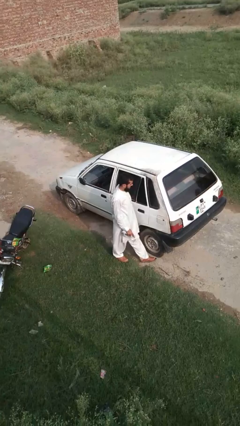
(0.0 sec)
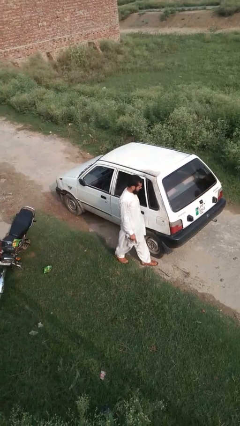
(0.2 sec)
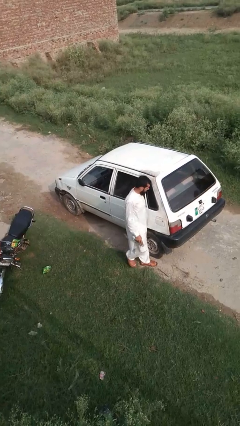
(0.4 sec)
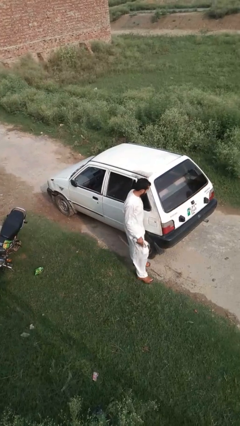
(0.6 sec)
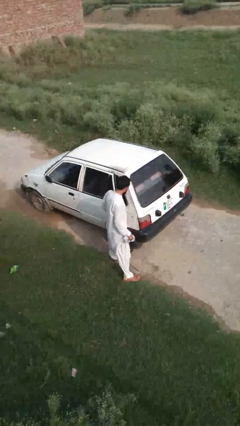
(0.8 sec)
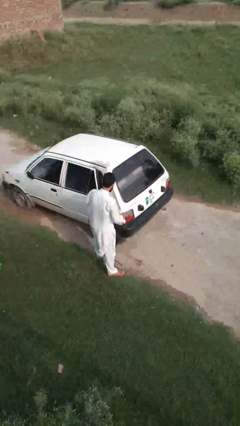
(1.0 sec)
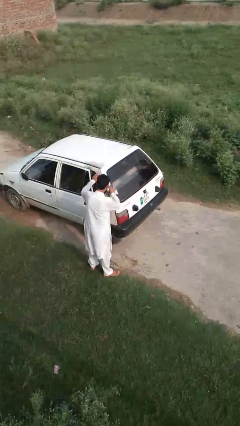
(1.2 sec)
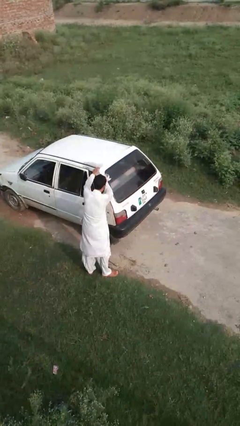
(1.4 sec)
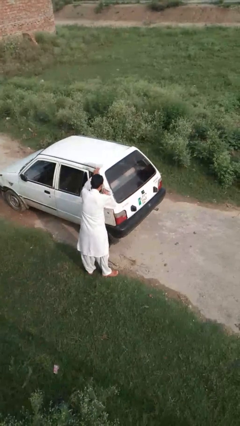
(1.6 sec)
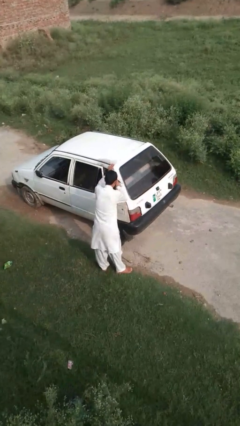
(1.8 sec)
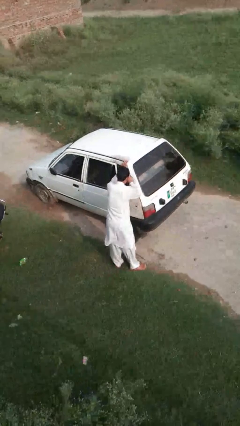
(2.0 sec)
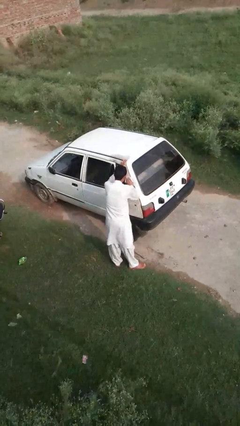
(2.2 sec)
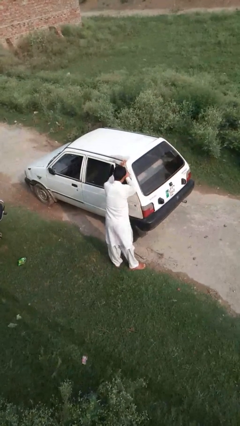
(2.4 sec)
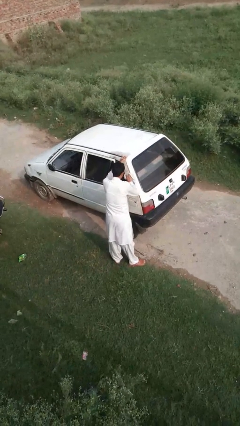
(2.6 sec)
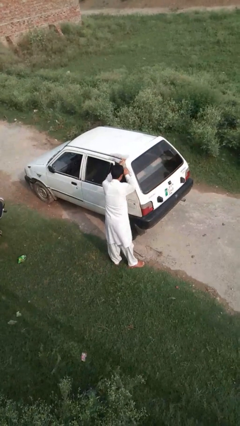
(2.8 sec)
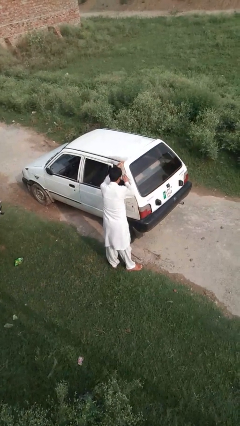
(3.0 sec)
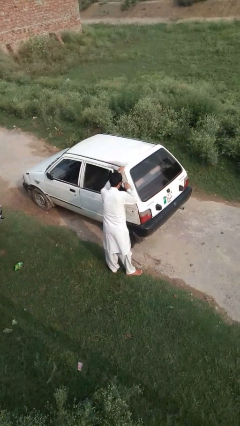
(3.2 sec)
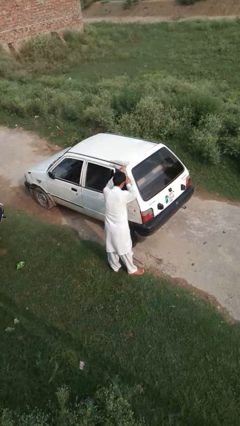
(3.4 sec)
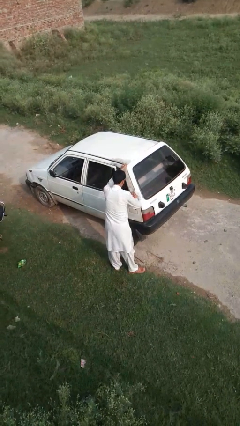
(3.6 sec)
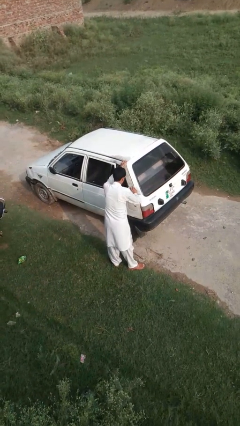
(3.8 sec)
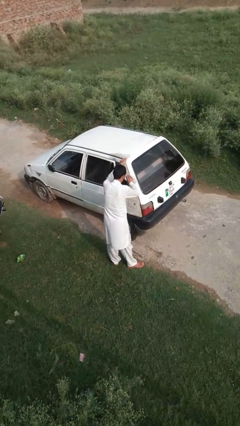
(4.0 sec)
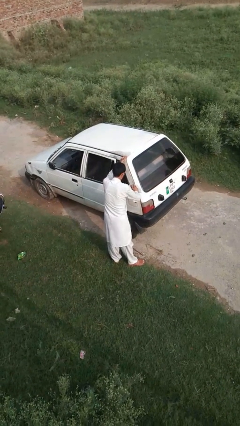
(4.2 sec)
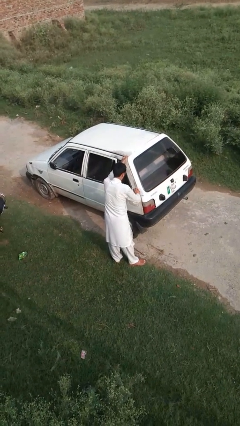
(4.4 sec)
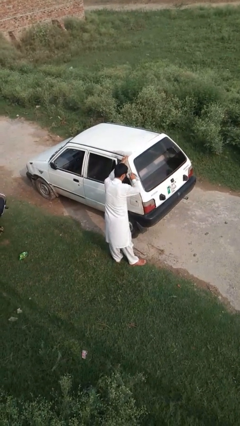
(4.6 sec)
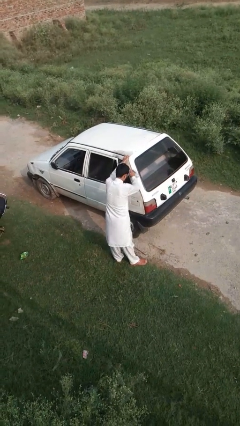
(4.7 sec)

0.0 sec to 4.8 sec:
person polishes car with rag

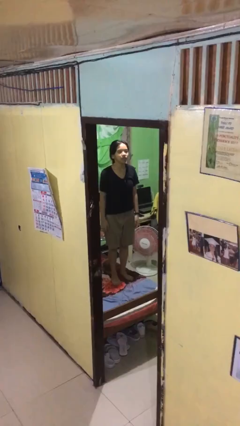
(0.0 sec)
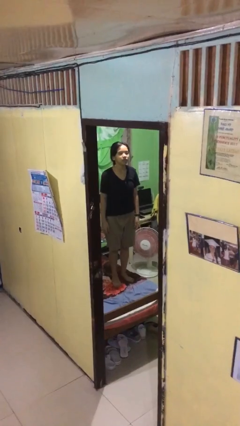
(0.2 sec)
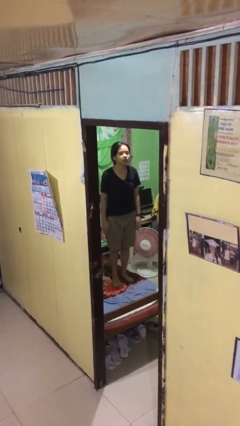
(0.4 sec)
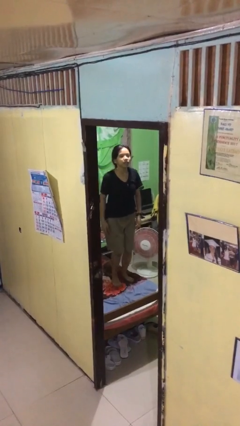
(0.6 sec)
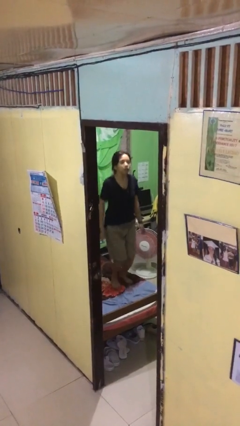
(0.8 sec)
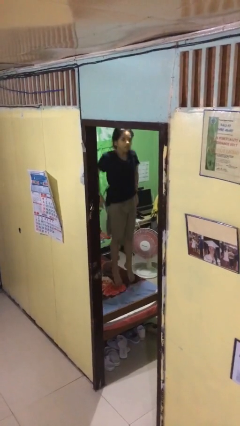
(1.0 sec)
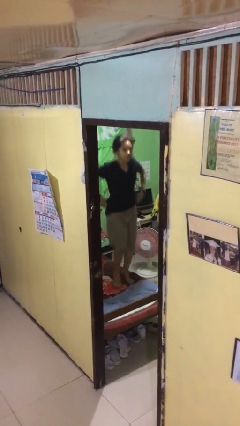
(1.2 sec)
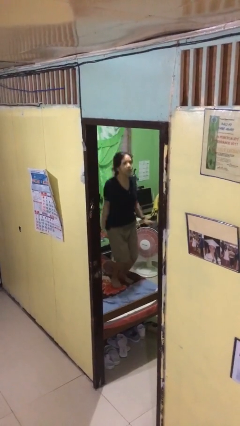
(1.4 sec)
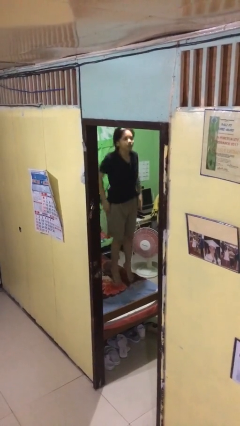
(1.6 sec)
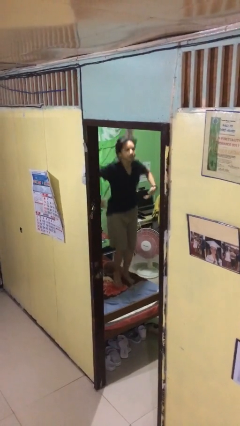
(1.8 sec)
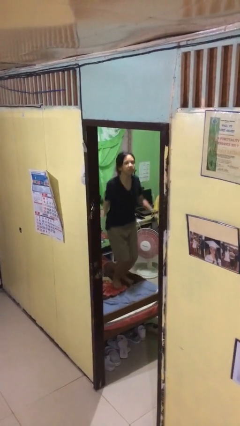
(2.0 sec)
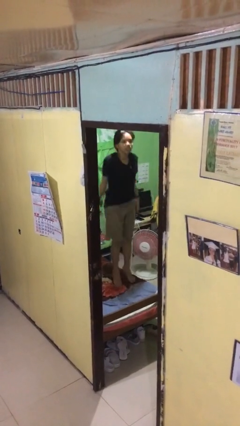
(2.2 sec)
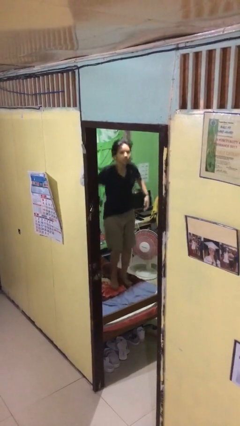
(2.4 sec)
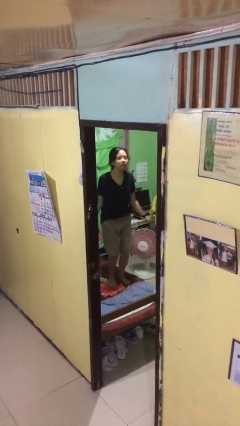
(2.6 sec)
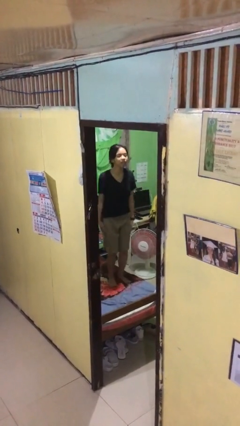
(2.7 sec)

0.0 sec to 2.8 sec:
person jumps on bed

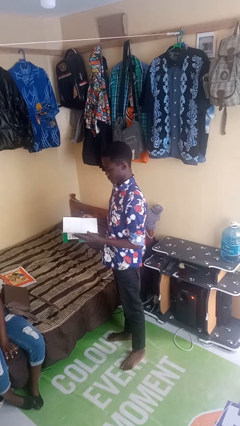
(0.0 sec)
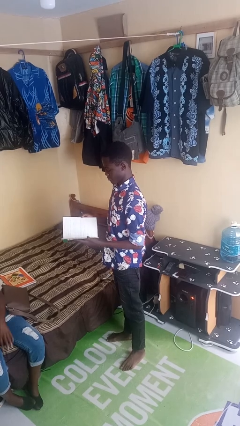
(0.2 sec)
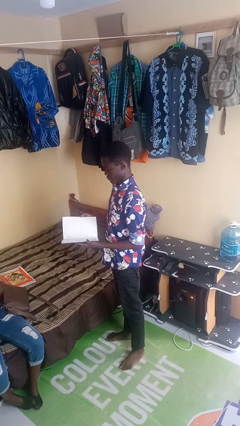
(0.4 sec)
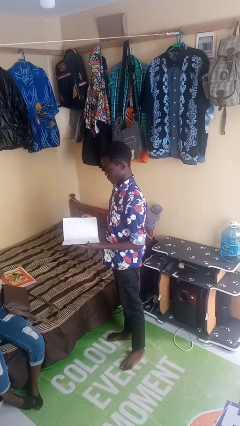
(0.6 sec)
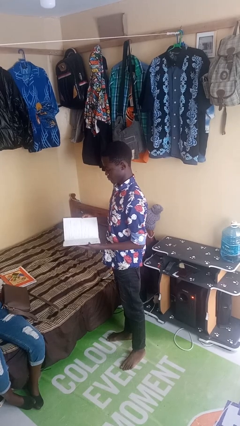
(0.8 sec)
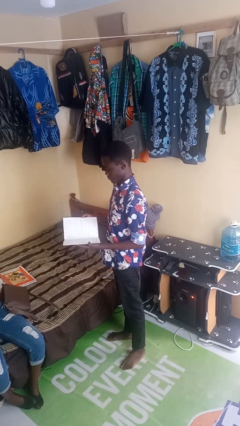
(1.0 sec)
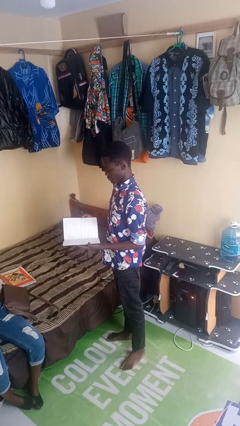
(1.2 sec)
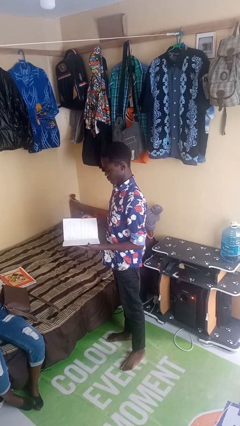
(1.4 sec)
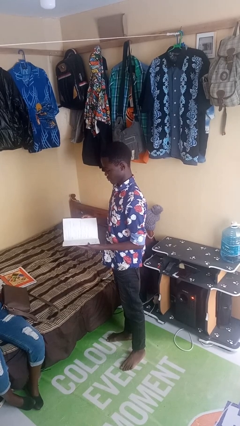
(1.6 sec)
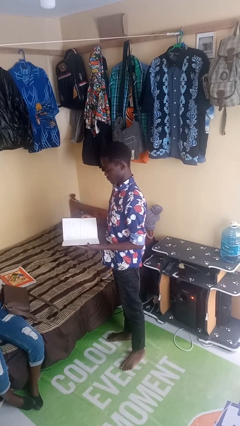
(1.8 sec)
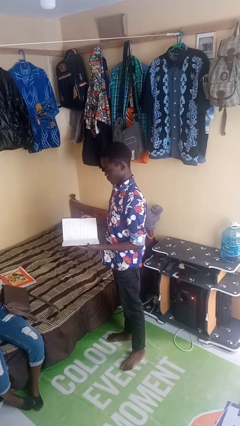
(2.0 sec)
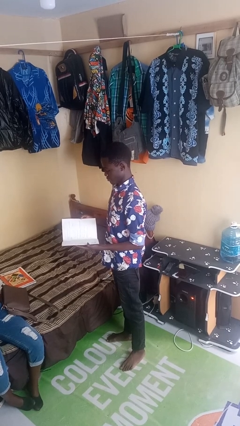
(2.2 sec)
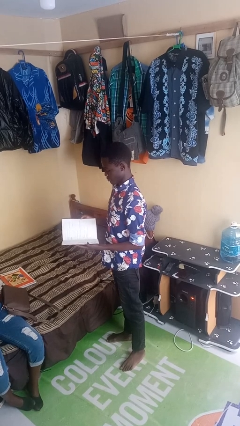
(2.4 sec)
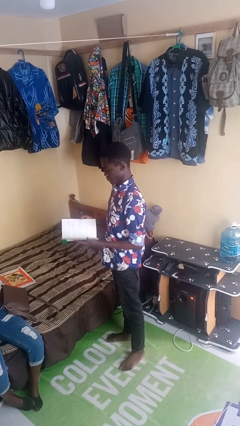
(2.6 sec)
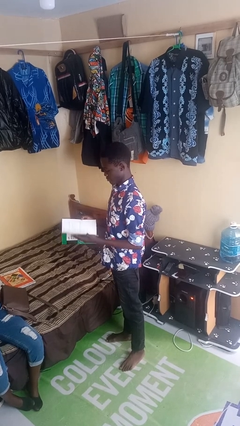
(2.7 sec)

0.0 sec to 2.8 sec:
person reads magazine

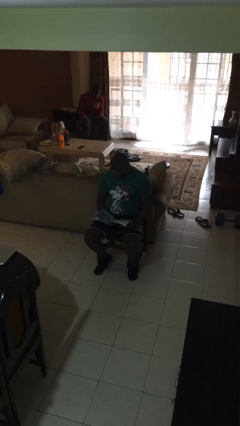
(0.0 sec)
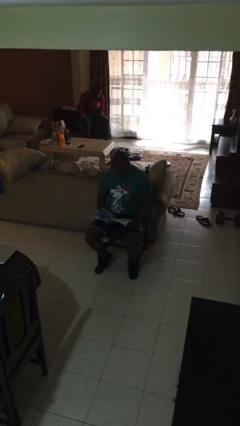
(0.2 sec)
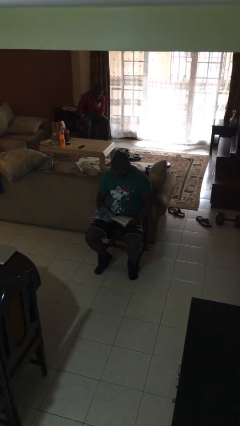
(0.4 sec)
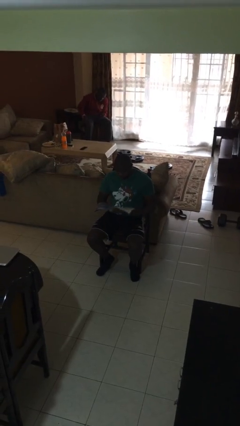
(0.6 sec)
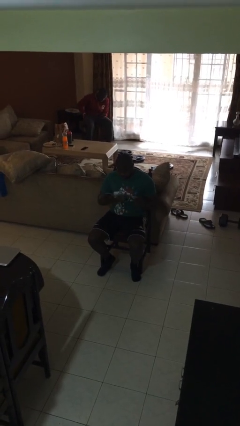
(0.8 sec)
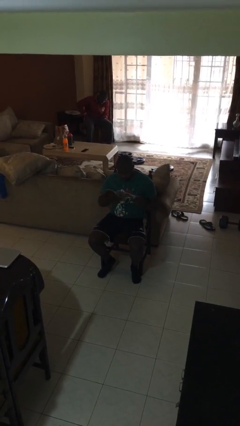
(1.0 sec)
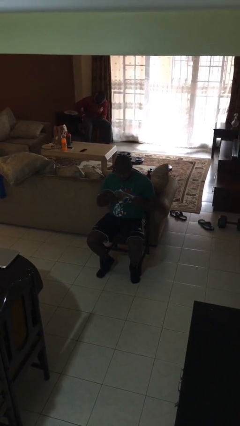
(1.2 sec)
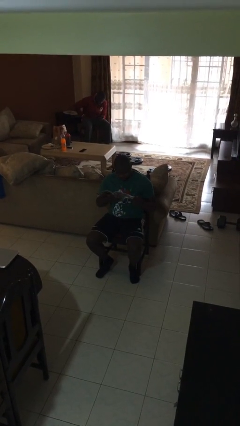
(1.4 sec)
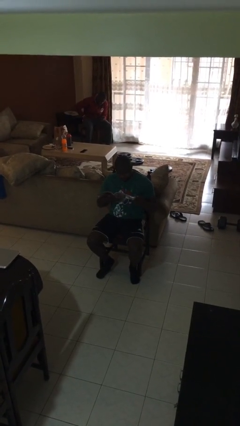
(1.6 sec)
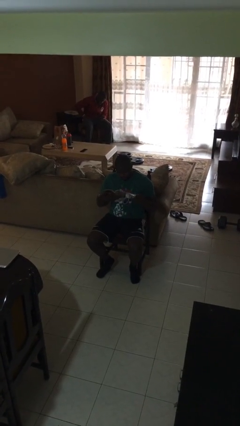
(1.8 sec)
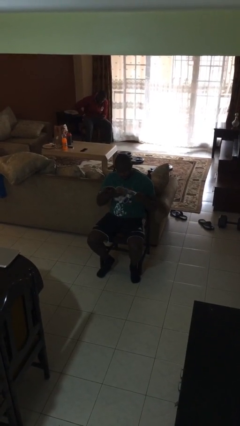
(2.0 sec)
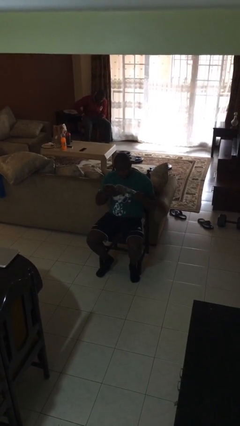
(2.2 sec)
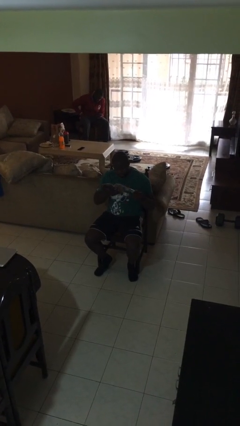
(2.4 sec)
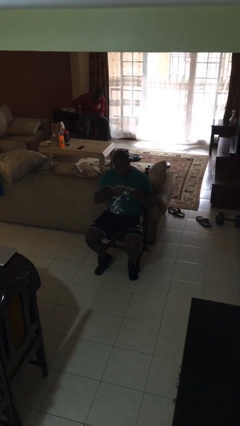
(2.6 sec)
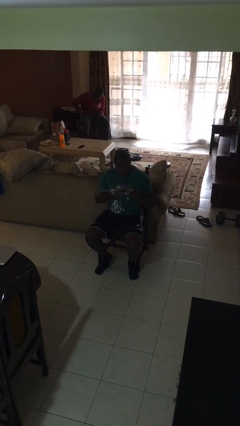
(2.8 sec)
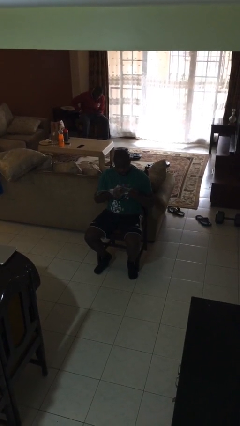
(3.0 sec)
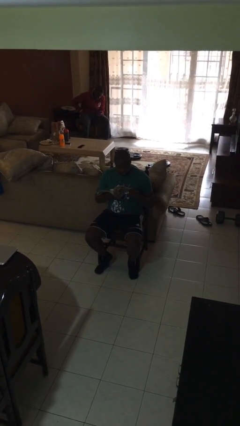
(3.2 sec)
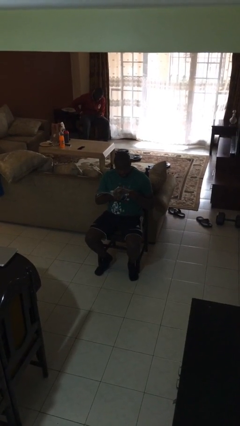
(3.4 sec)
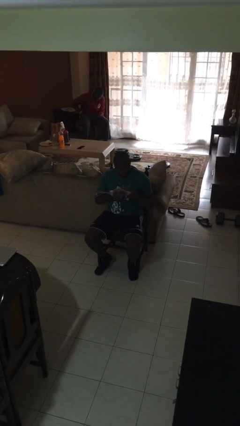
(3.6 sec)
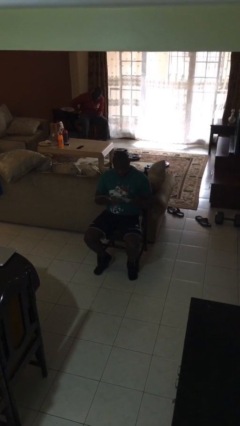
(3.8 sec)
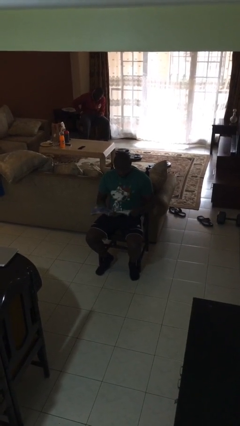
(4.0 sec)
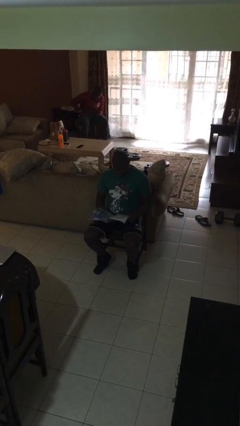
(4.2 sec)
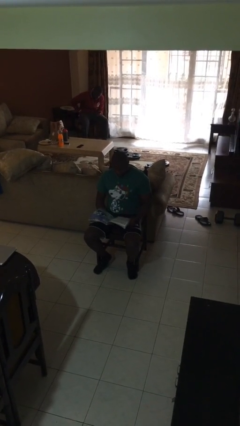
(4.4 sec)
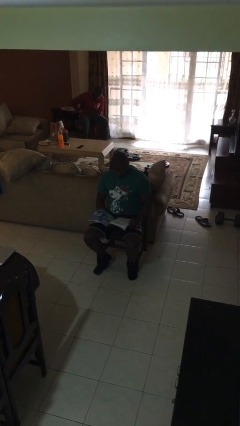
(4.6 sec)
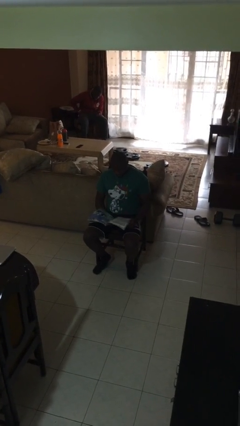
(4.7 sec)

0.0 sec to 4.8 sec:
person reads document

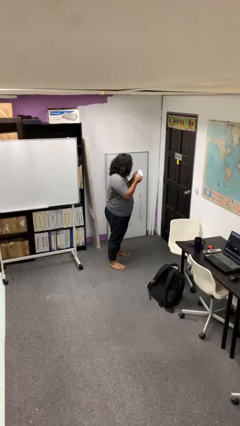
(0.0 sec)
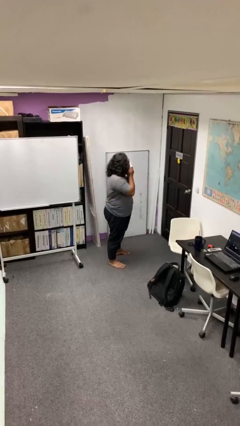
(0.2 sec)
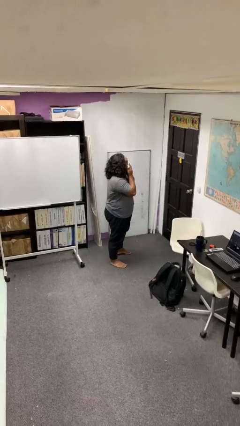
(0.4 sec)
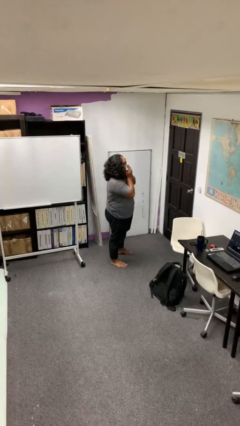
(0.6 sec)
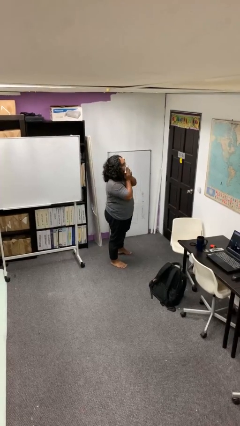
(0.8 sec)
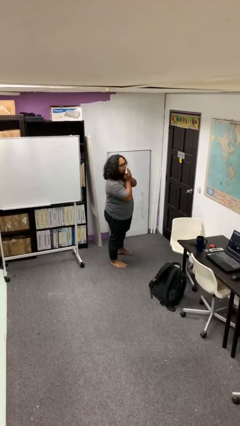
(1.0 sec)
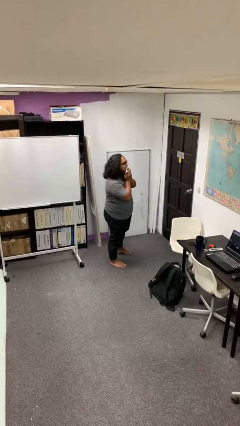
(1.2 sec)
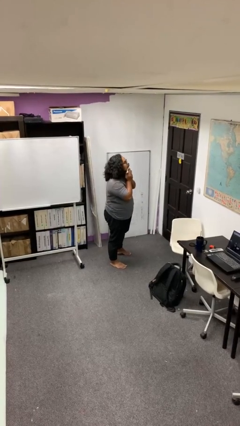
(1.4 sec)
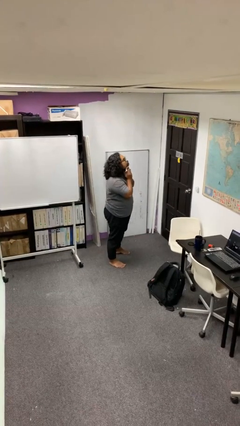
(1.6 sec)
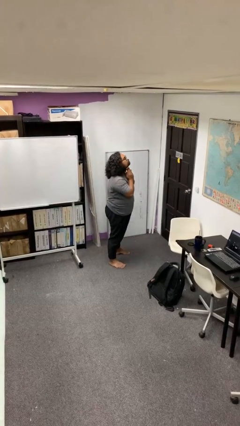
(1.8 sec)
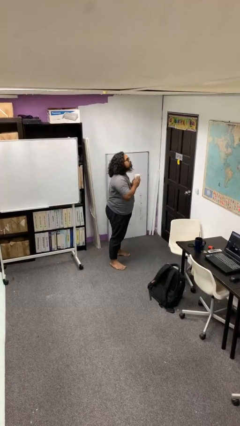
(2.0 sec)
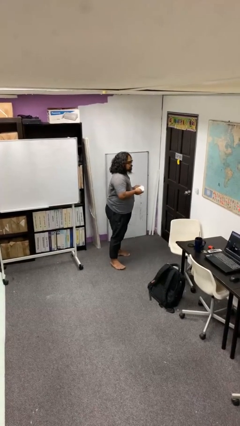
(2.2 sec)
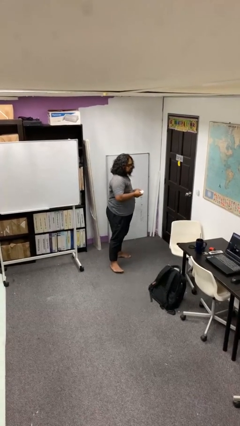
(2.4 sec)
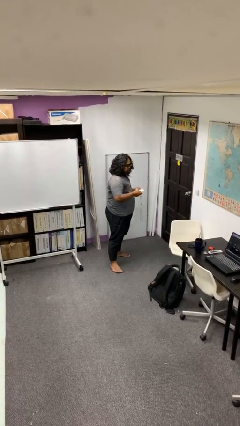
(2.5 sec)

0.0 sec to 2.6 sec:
person wipes mouth with napkin
